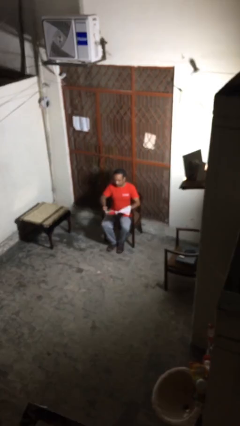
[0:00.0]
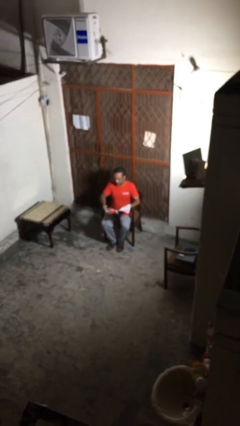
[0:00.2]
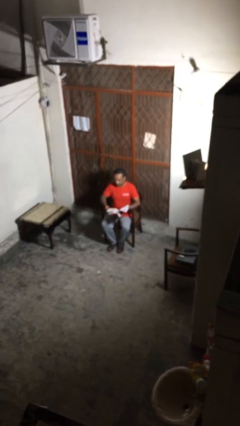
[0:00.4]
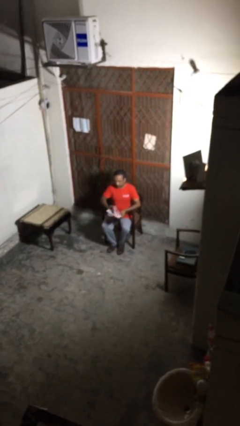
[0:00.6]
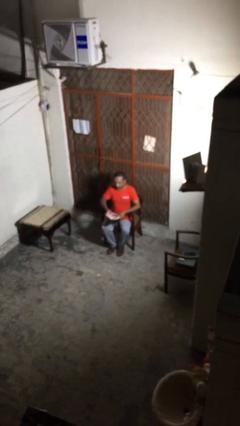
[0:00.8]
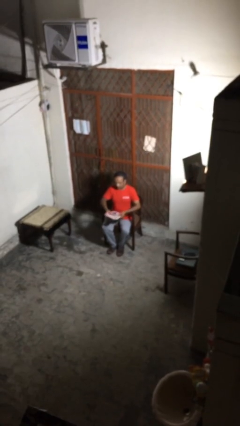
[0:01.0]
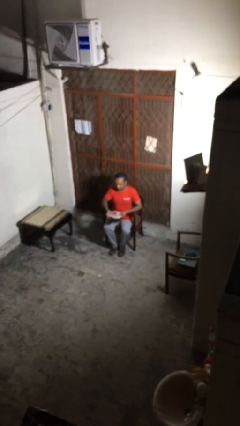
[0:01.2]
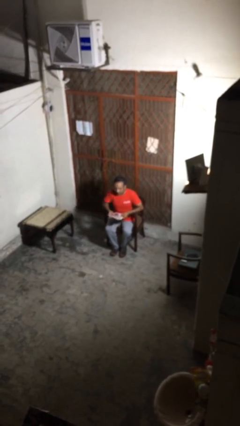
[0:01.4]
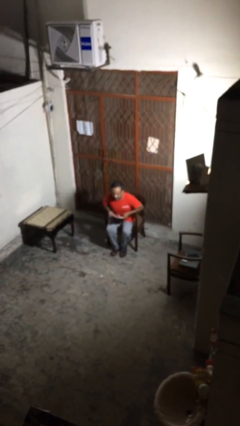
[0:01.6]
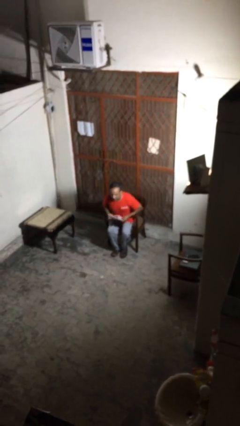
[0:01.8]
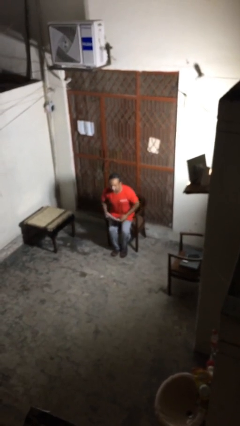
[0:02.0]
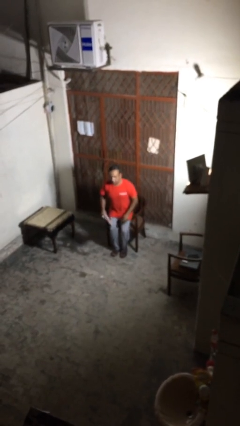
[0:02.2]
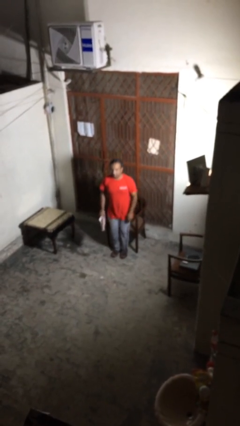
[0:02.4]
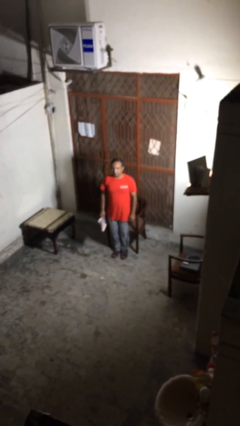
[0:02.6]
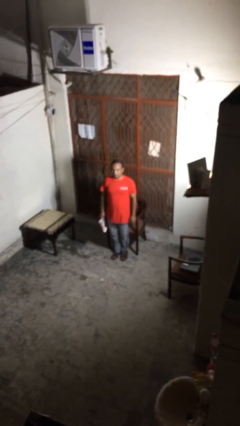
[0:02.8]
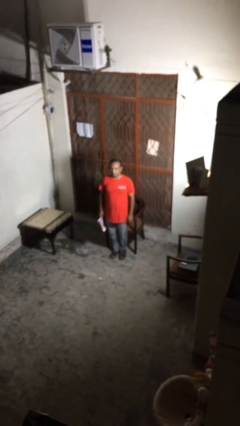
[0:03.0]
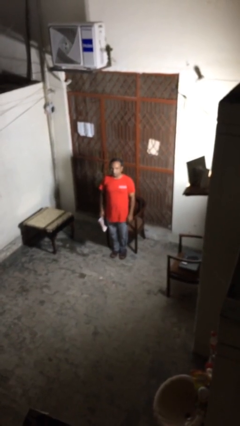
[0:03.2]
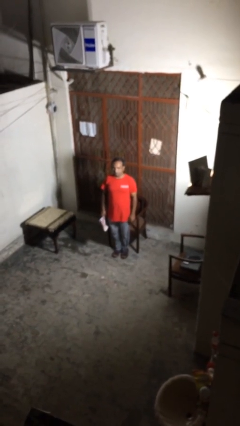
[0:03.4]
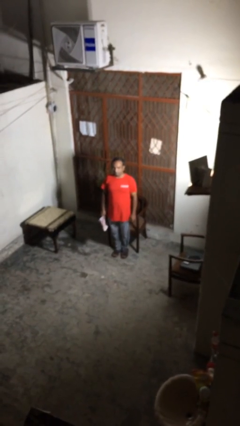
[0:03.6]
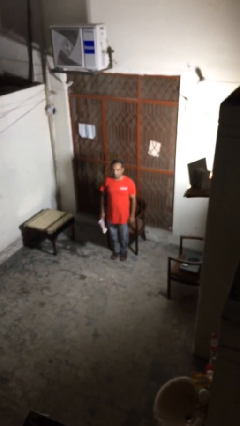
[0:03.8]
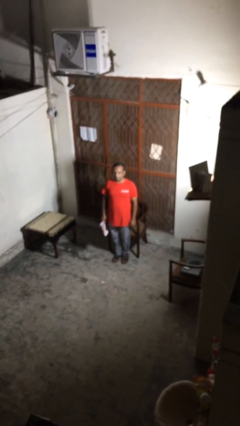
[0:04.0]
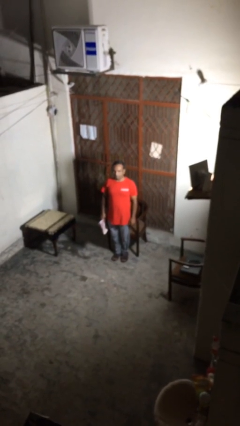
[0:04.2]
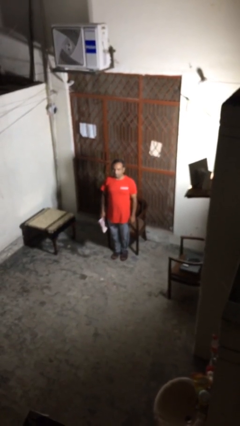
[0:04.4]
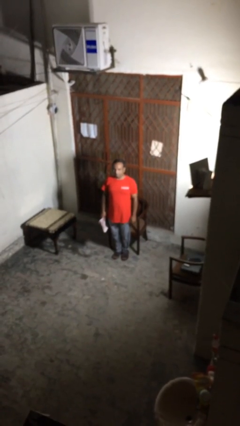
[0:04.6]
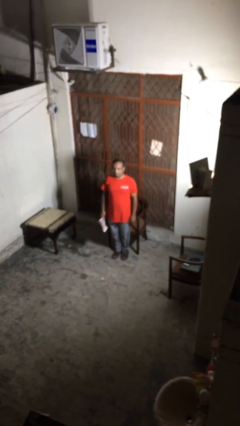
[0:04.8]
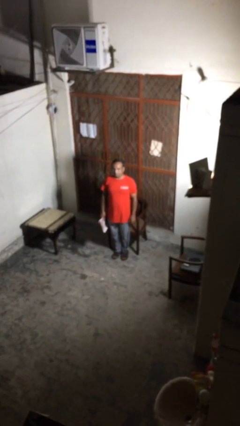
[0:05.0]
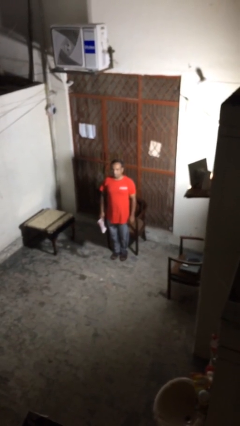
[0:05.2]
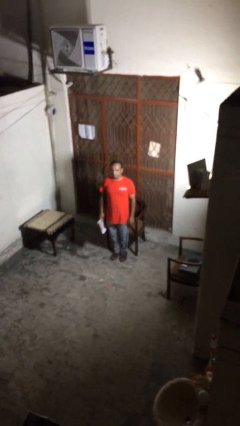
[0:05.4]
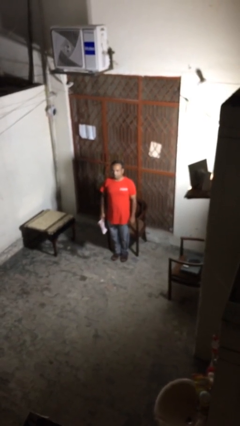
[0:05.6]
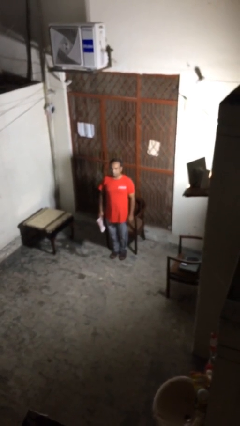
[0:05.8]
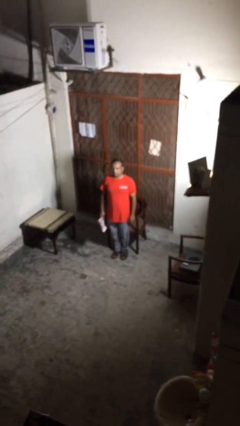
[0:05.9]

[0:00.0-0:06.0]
person stands up

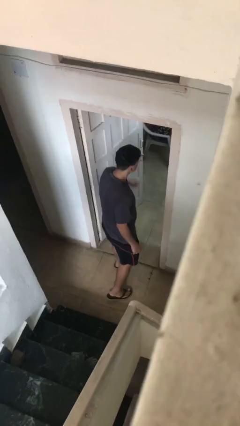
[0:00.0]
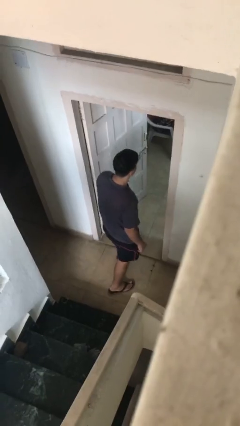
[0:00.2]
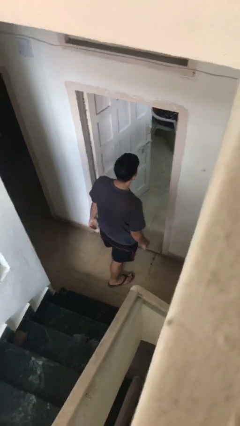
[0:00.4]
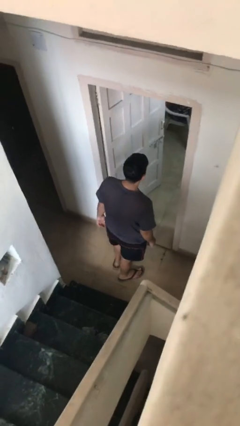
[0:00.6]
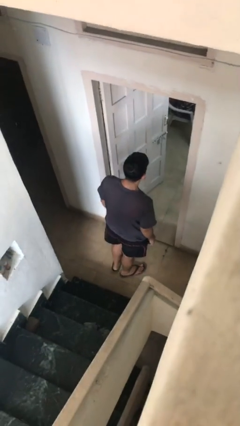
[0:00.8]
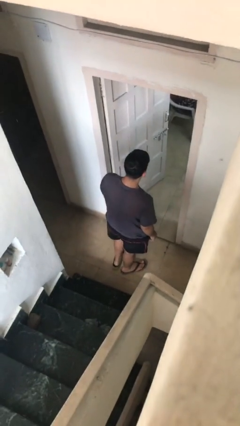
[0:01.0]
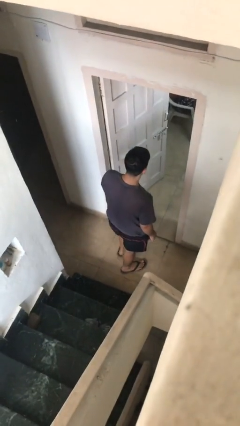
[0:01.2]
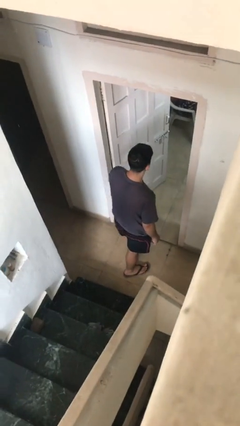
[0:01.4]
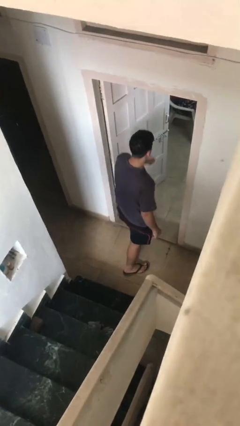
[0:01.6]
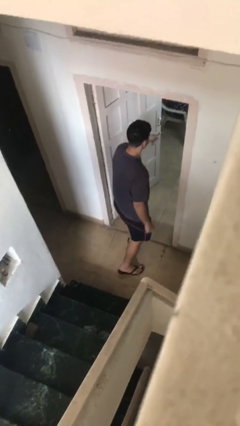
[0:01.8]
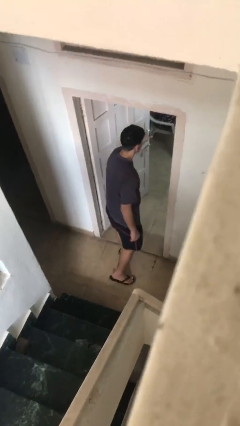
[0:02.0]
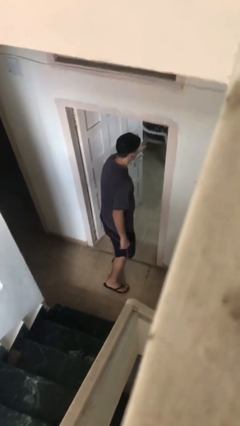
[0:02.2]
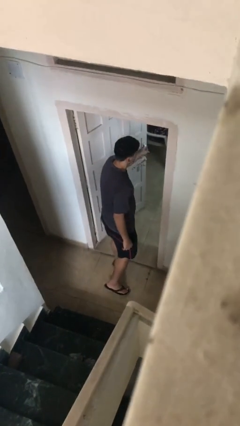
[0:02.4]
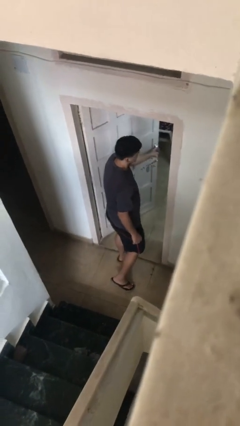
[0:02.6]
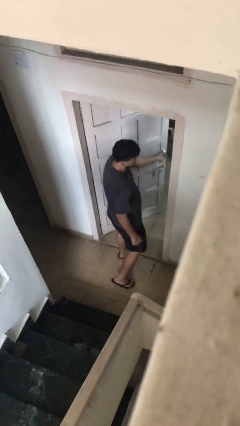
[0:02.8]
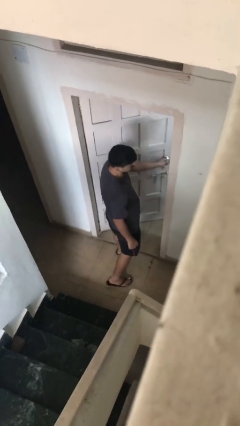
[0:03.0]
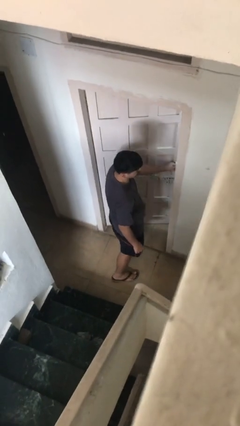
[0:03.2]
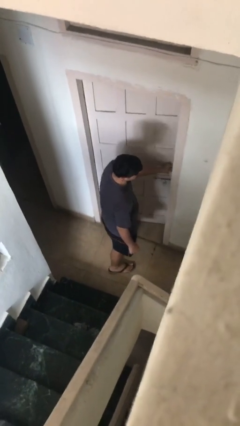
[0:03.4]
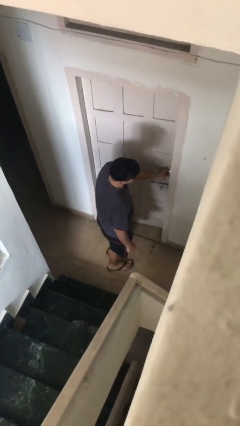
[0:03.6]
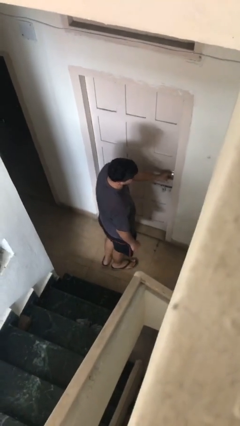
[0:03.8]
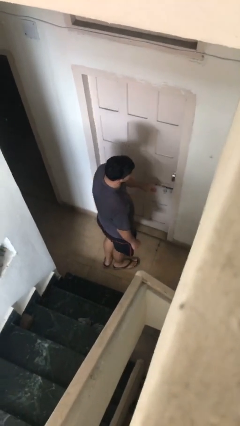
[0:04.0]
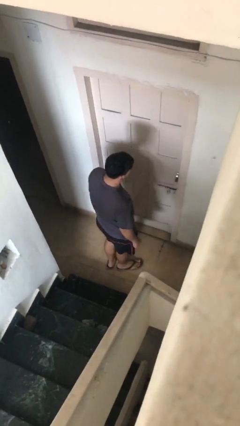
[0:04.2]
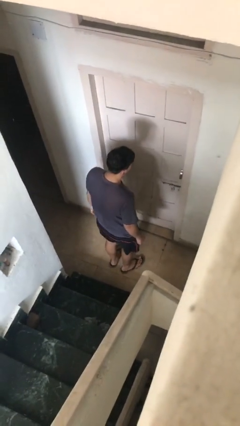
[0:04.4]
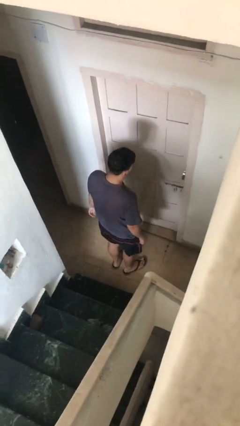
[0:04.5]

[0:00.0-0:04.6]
person closes facility door

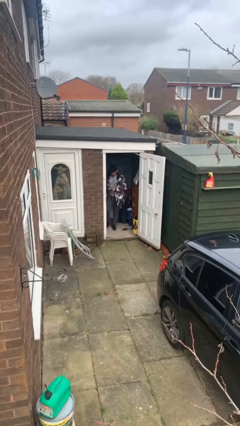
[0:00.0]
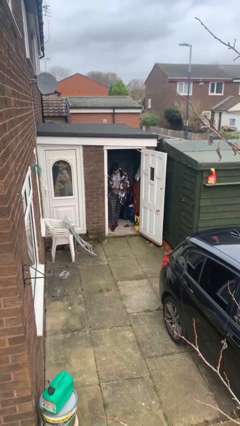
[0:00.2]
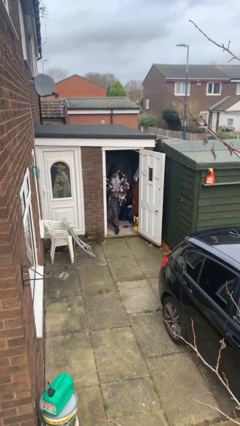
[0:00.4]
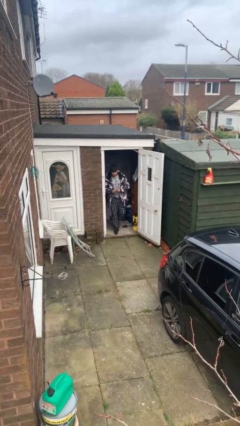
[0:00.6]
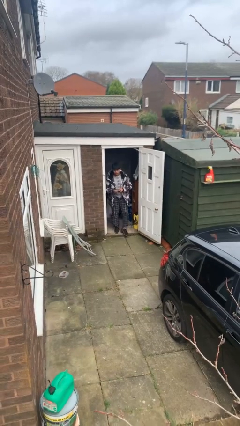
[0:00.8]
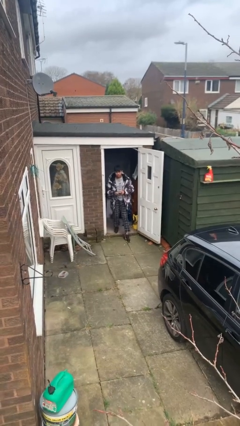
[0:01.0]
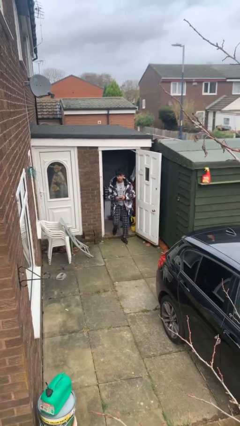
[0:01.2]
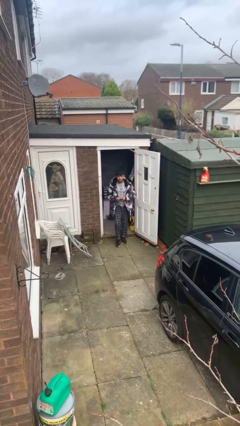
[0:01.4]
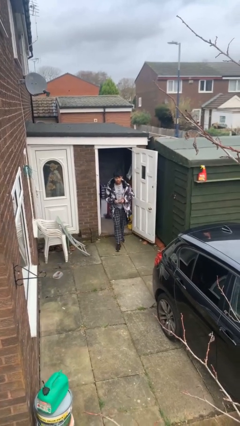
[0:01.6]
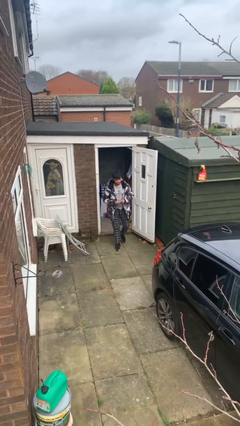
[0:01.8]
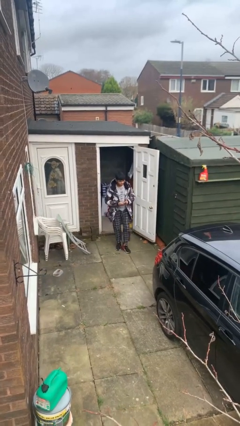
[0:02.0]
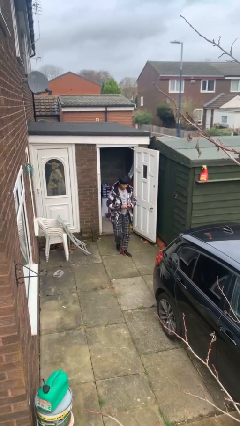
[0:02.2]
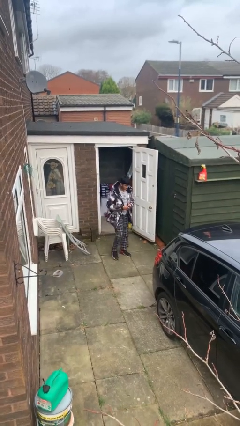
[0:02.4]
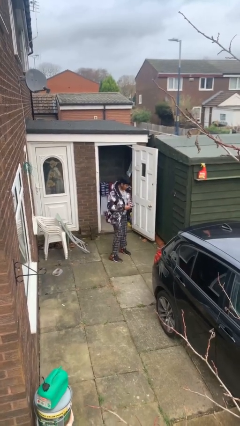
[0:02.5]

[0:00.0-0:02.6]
person enters scene through structure

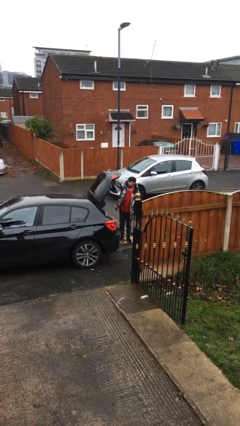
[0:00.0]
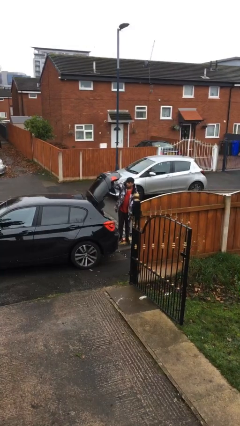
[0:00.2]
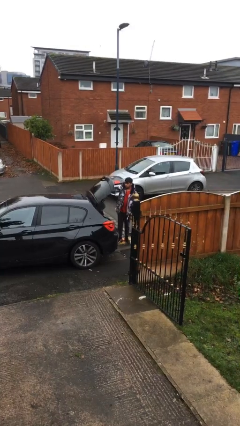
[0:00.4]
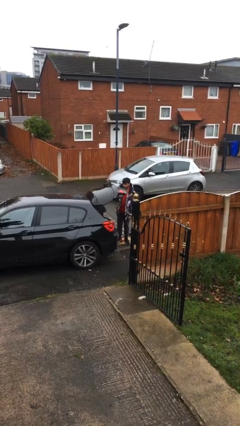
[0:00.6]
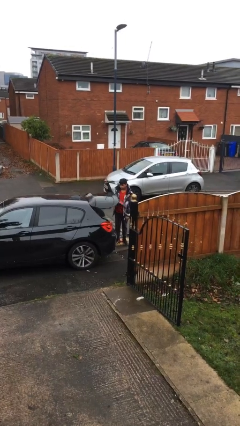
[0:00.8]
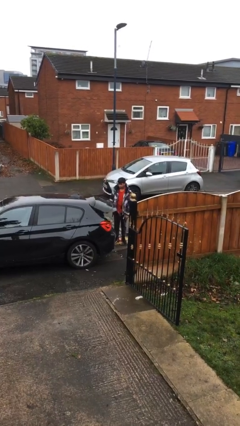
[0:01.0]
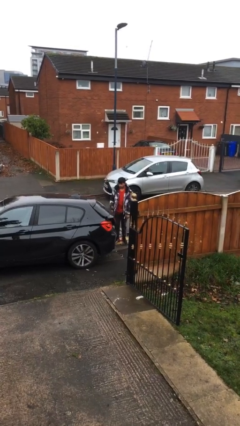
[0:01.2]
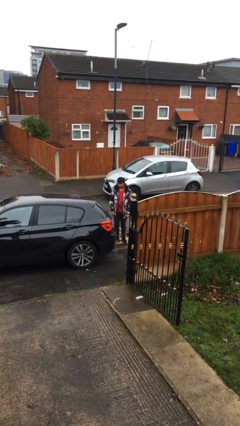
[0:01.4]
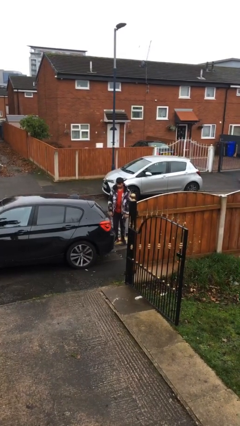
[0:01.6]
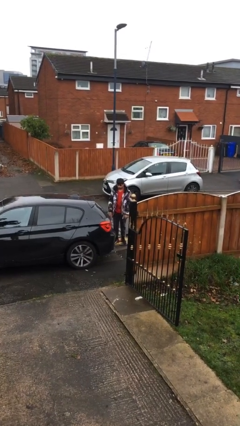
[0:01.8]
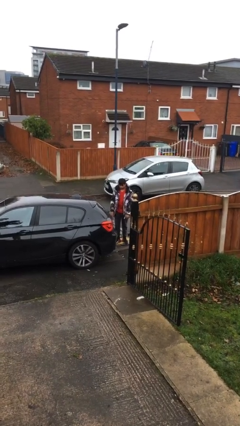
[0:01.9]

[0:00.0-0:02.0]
person closes car trunk

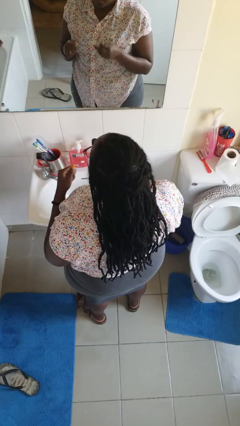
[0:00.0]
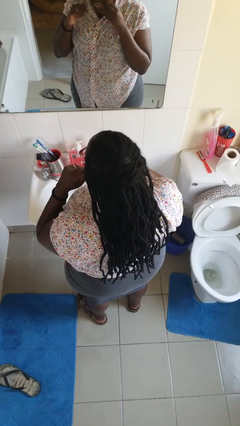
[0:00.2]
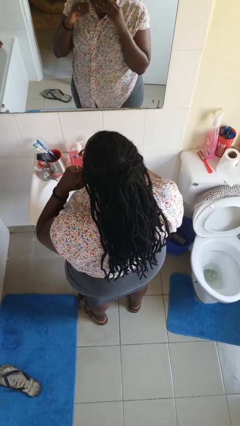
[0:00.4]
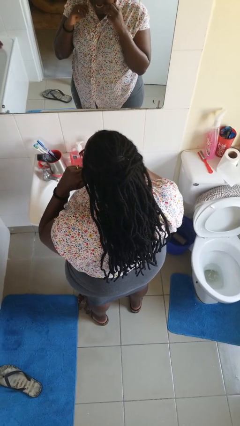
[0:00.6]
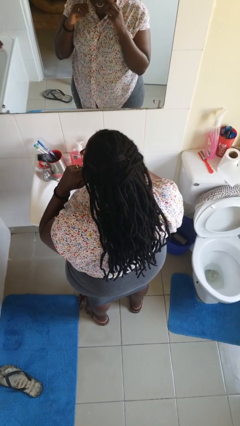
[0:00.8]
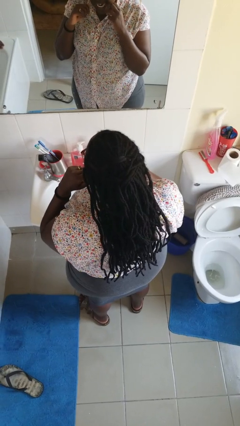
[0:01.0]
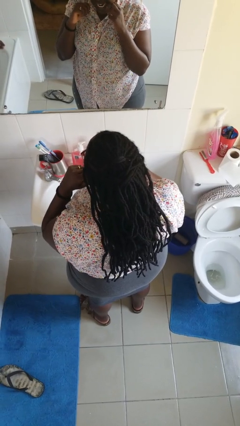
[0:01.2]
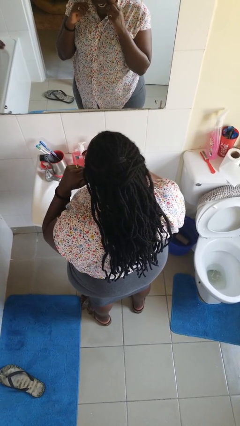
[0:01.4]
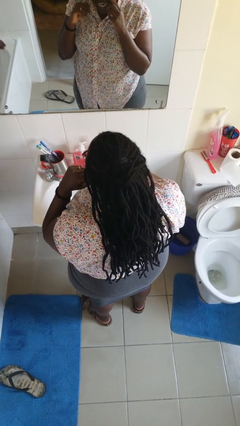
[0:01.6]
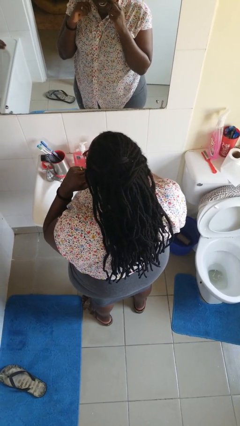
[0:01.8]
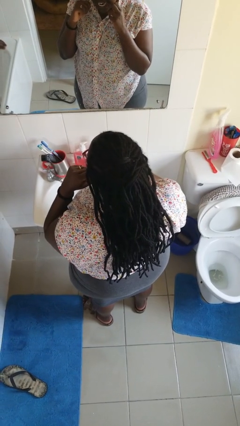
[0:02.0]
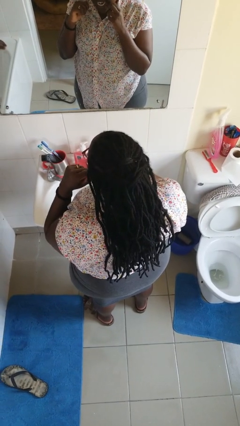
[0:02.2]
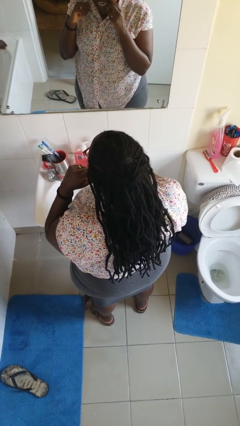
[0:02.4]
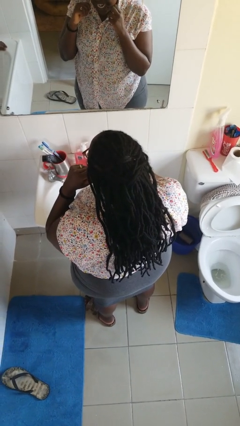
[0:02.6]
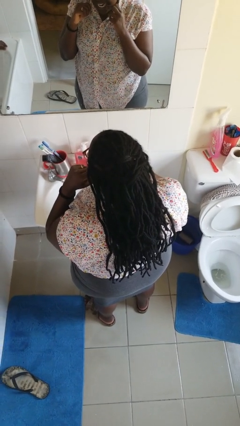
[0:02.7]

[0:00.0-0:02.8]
person flosses
